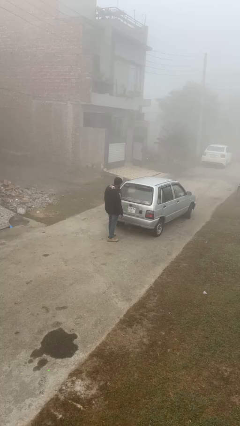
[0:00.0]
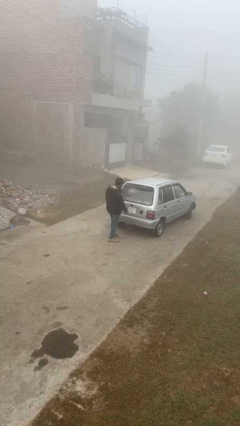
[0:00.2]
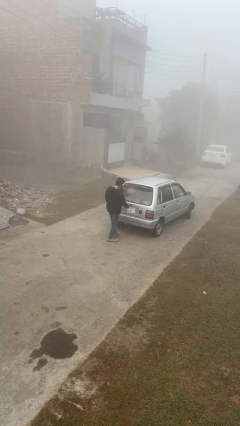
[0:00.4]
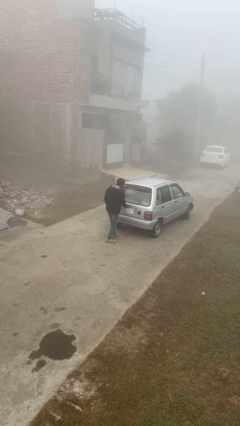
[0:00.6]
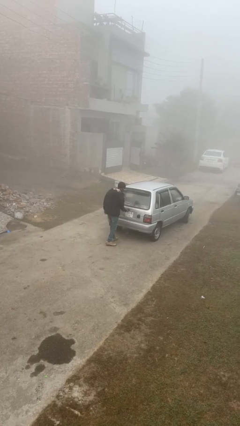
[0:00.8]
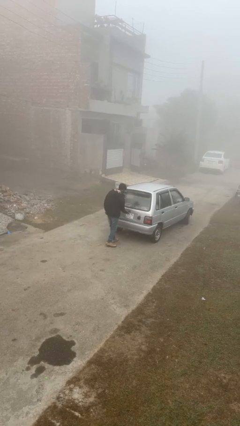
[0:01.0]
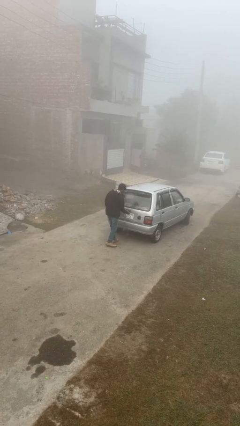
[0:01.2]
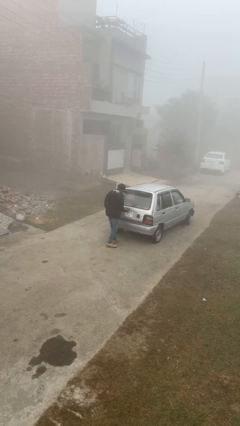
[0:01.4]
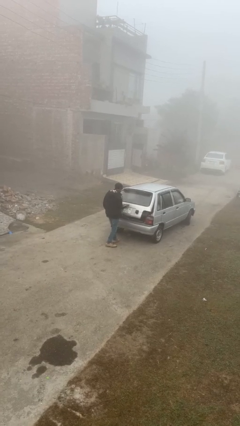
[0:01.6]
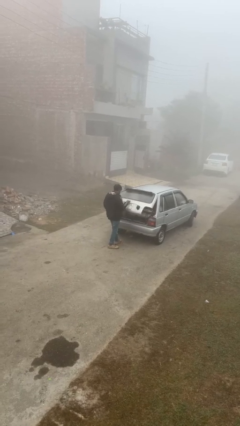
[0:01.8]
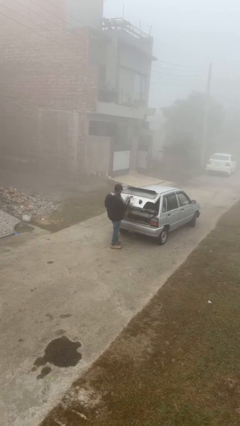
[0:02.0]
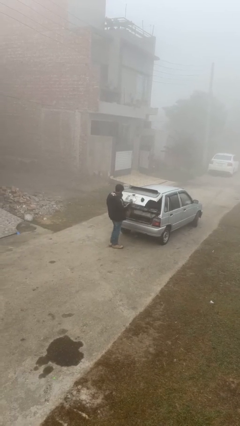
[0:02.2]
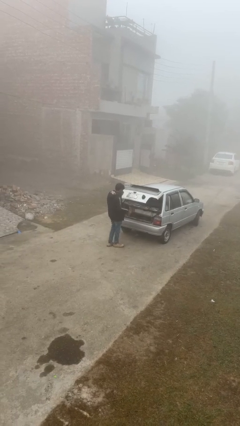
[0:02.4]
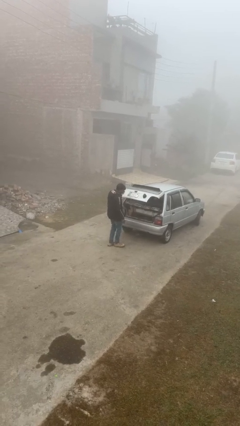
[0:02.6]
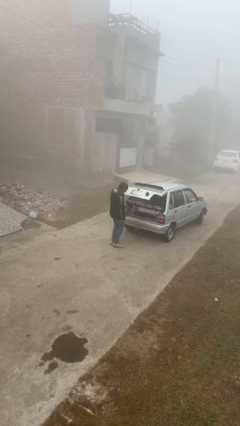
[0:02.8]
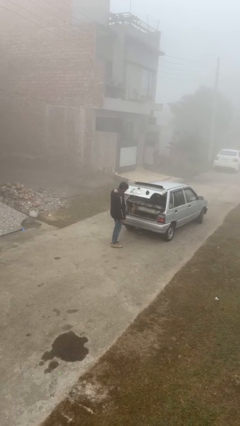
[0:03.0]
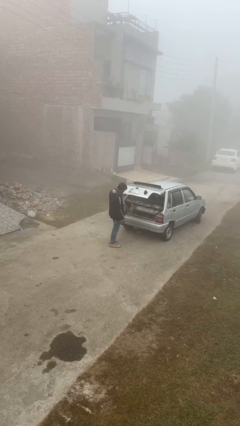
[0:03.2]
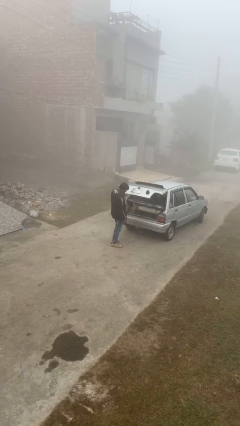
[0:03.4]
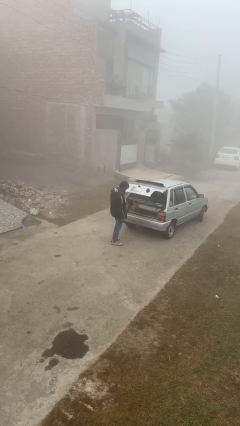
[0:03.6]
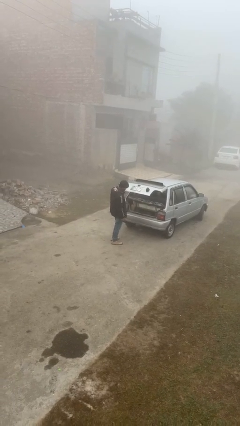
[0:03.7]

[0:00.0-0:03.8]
person opens car trunk

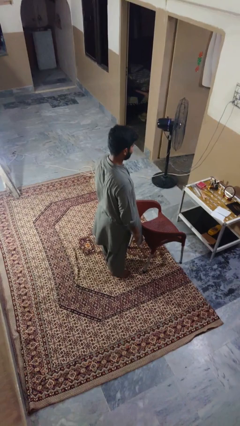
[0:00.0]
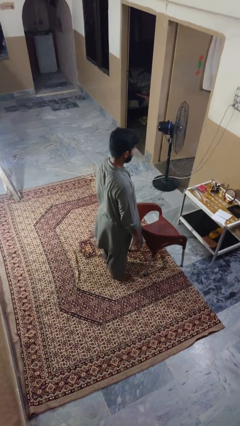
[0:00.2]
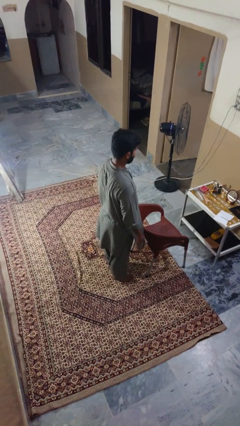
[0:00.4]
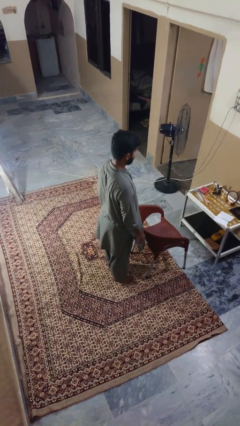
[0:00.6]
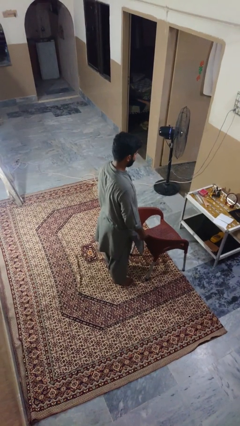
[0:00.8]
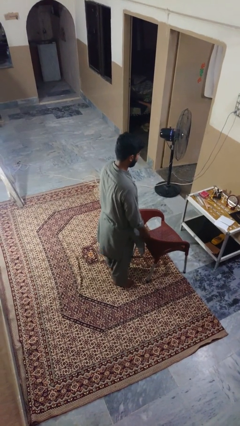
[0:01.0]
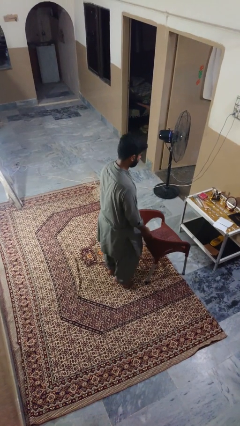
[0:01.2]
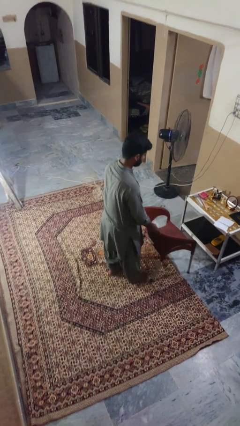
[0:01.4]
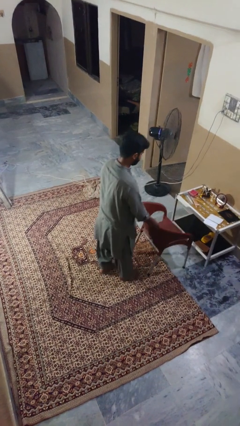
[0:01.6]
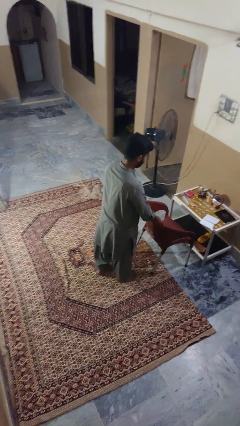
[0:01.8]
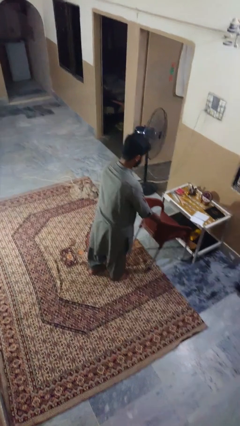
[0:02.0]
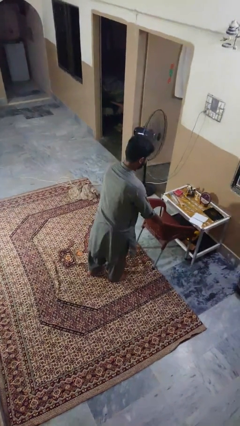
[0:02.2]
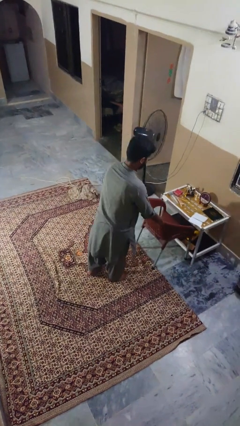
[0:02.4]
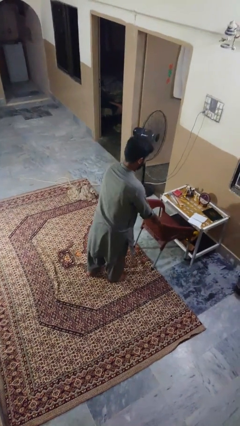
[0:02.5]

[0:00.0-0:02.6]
person pushes in chair

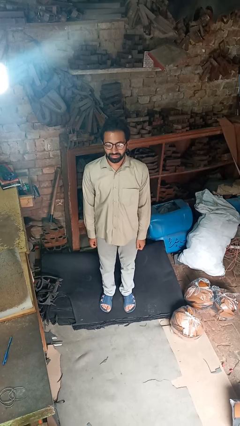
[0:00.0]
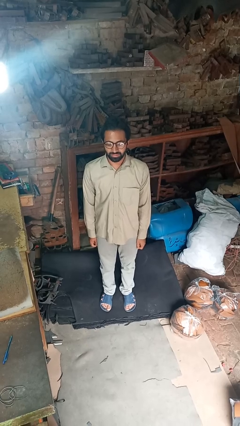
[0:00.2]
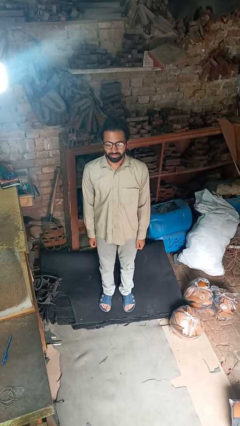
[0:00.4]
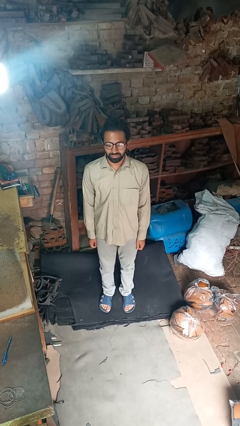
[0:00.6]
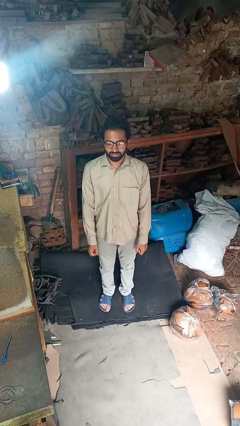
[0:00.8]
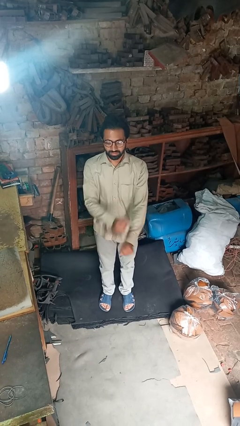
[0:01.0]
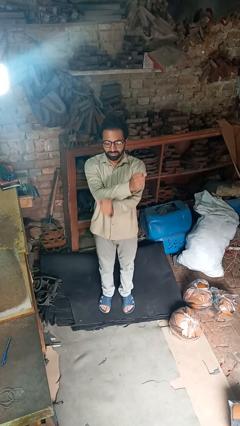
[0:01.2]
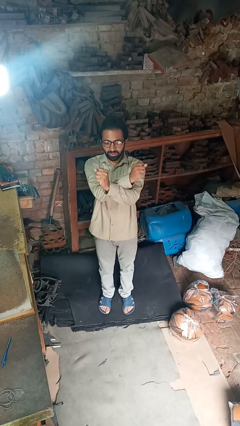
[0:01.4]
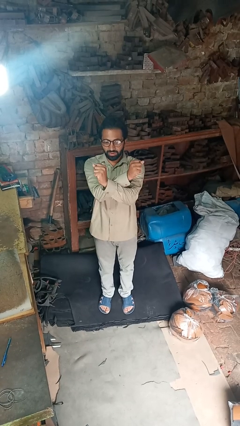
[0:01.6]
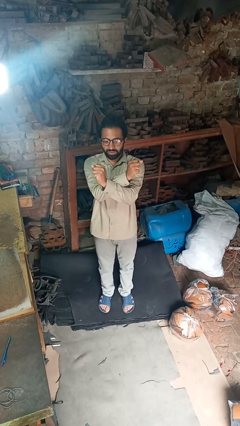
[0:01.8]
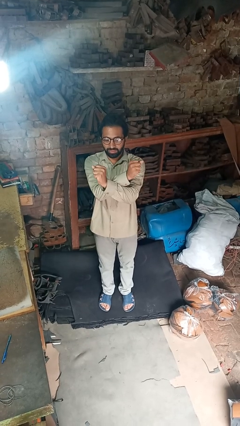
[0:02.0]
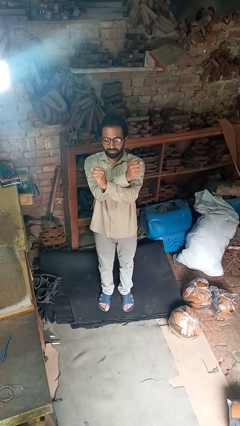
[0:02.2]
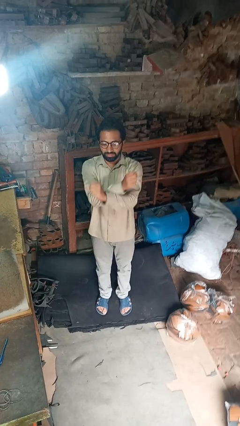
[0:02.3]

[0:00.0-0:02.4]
person crosses arms

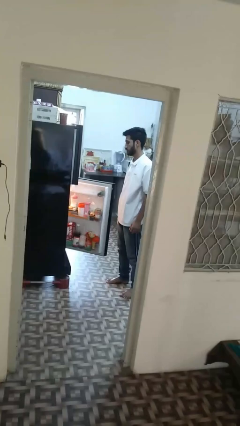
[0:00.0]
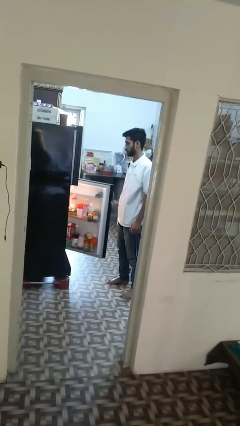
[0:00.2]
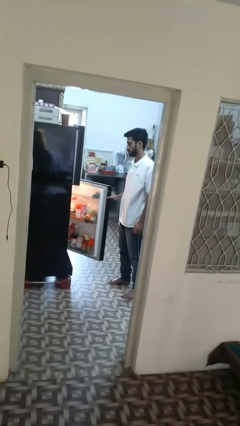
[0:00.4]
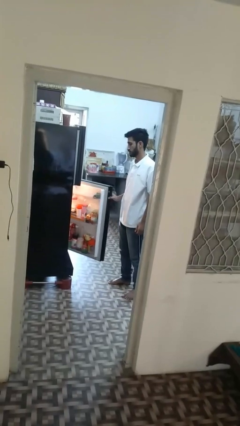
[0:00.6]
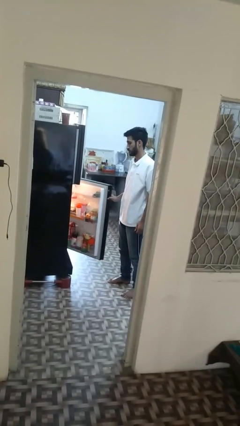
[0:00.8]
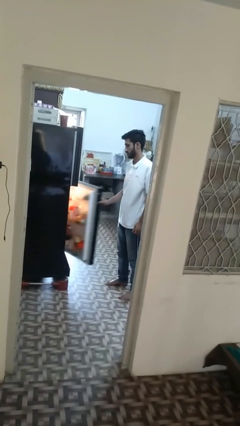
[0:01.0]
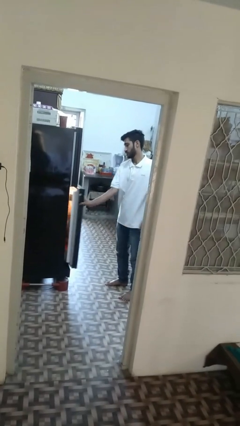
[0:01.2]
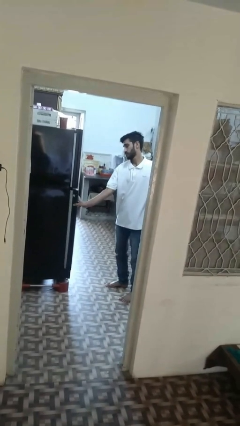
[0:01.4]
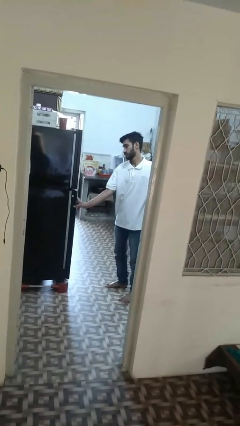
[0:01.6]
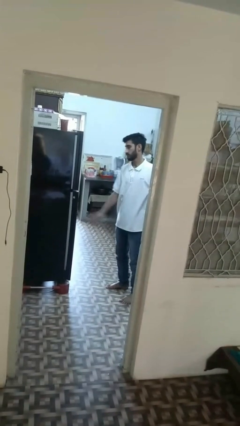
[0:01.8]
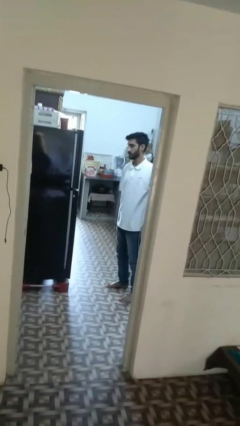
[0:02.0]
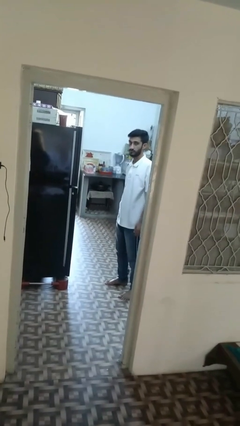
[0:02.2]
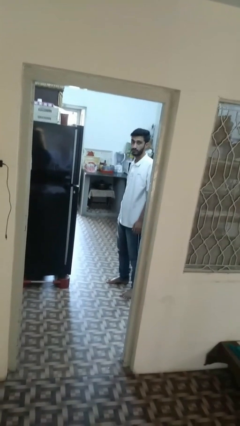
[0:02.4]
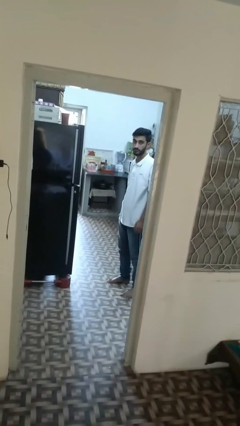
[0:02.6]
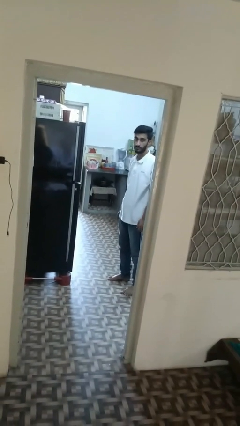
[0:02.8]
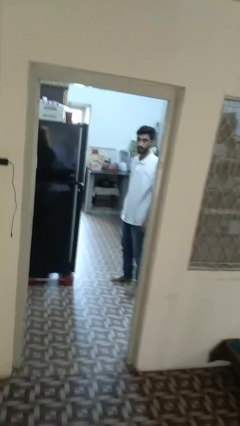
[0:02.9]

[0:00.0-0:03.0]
person closes refrigerator

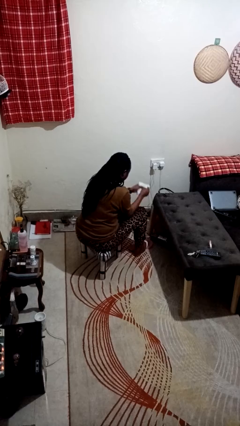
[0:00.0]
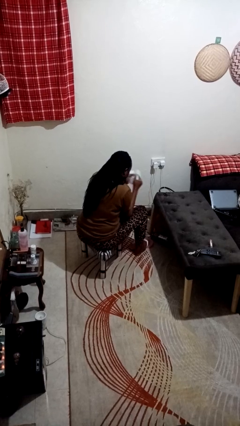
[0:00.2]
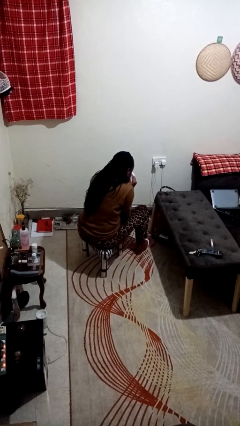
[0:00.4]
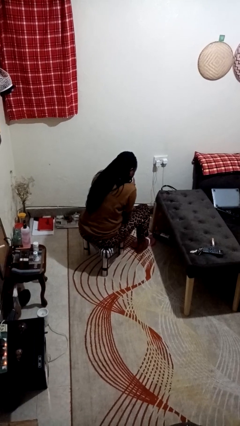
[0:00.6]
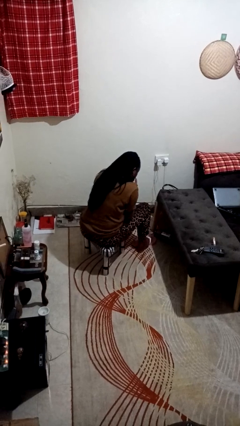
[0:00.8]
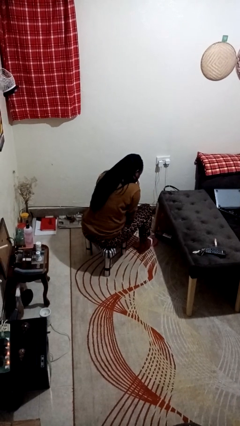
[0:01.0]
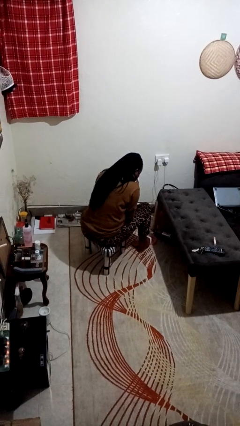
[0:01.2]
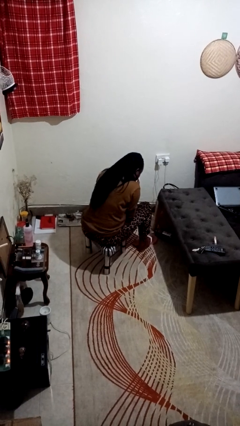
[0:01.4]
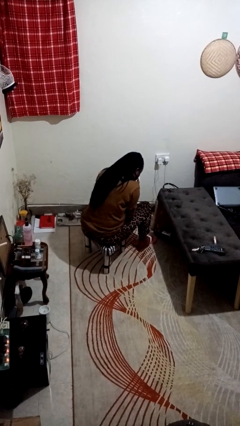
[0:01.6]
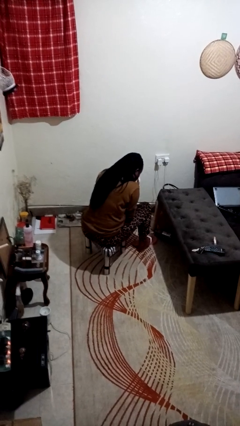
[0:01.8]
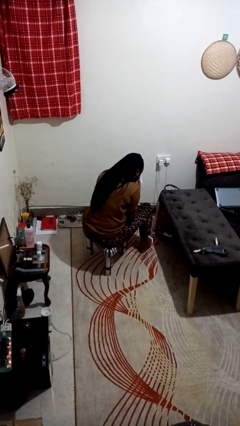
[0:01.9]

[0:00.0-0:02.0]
person blows nose

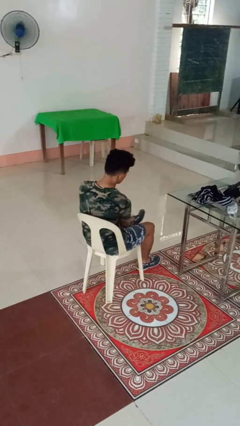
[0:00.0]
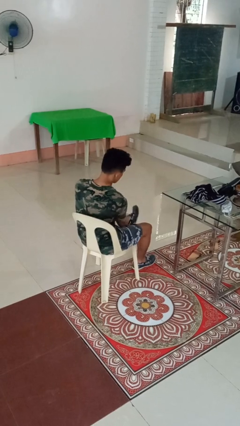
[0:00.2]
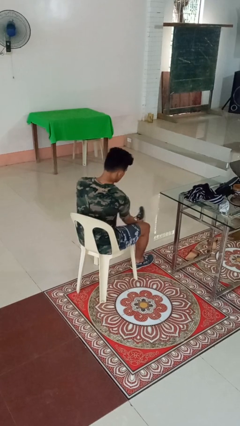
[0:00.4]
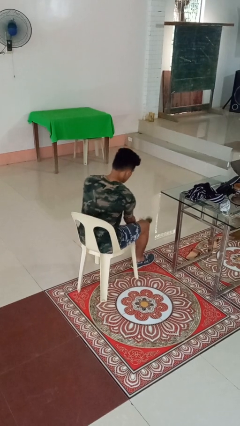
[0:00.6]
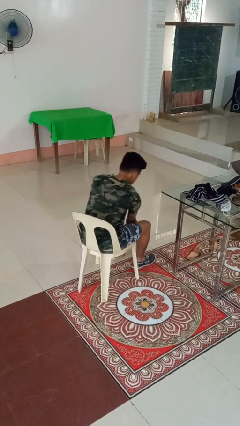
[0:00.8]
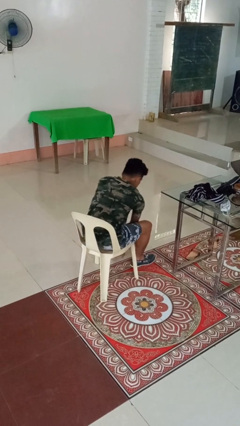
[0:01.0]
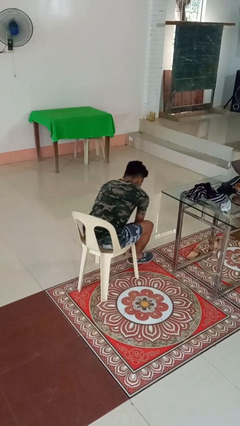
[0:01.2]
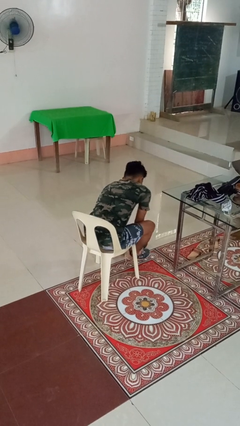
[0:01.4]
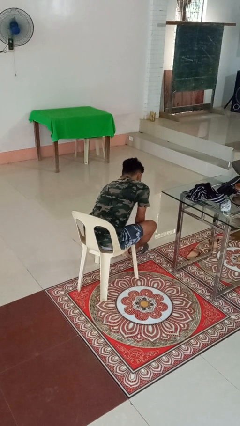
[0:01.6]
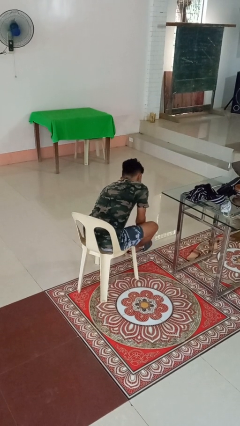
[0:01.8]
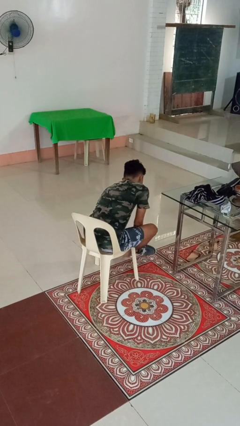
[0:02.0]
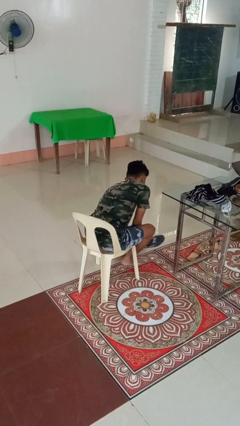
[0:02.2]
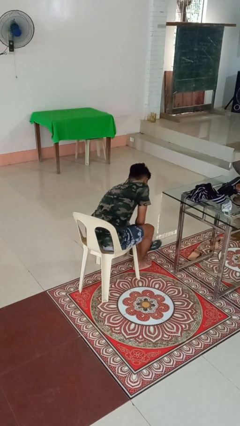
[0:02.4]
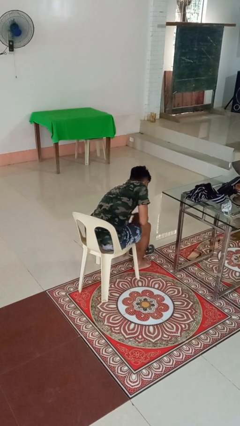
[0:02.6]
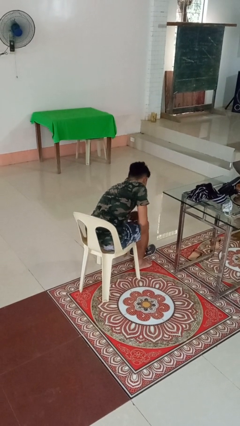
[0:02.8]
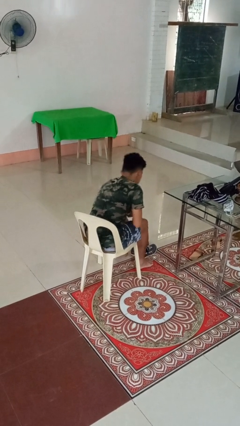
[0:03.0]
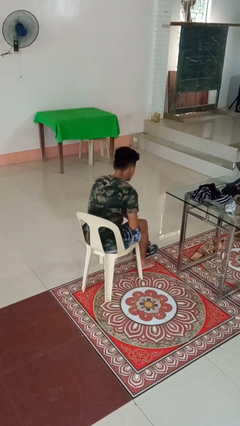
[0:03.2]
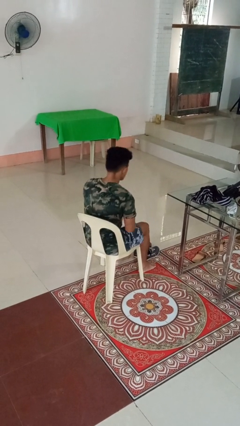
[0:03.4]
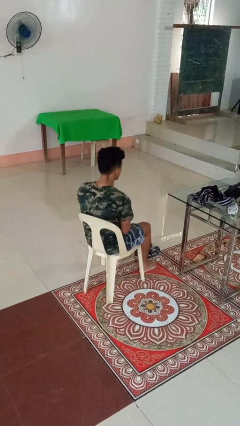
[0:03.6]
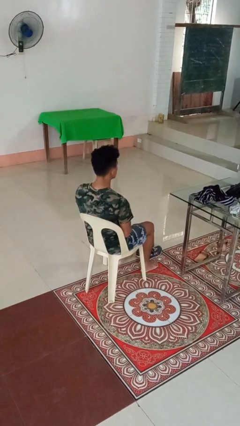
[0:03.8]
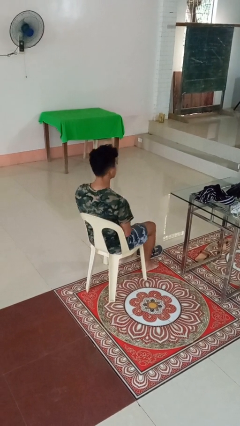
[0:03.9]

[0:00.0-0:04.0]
person takes off shoes
